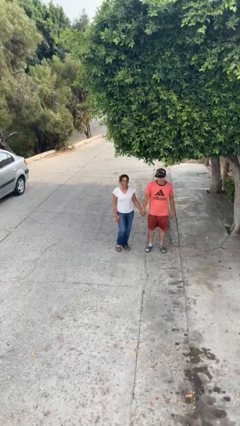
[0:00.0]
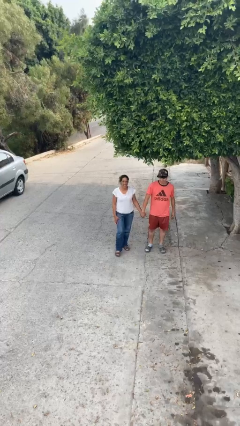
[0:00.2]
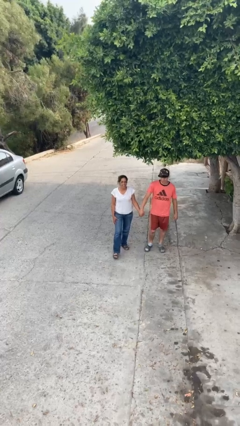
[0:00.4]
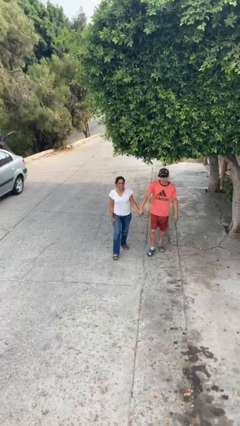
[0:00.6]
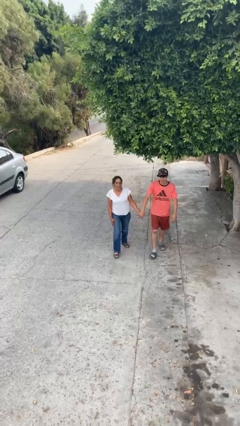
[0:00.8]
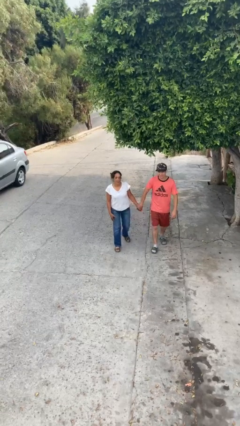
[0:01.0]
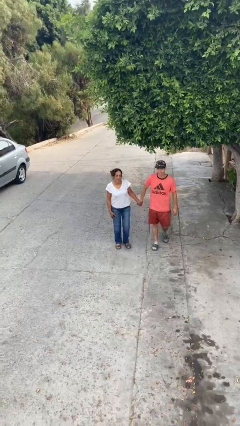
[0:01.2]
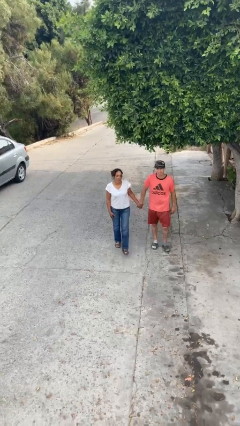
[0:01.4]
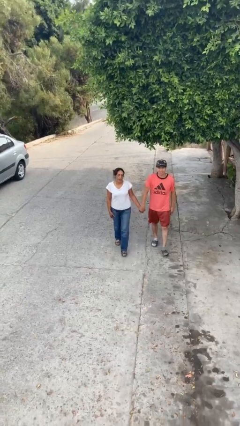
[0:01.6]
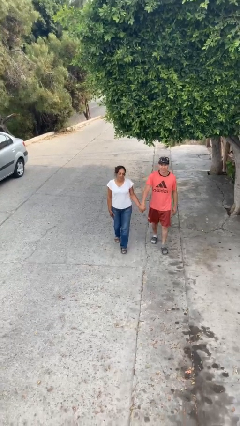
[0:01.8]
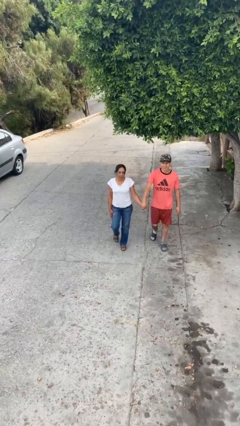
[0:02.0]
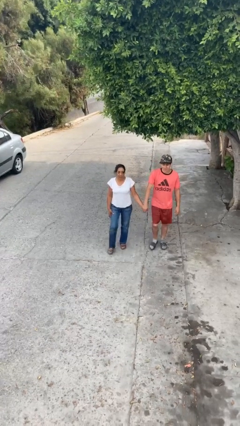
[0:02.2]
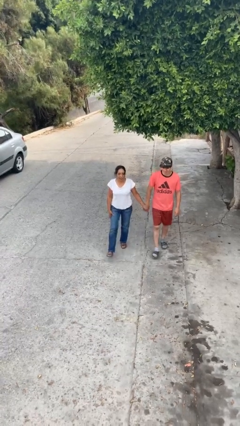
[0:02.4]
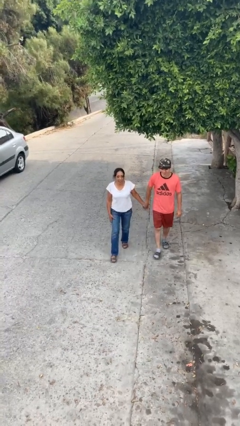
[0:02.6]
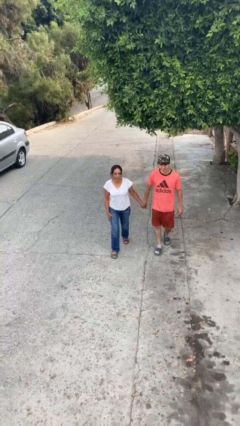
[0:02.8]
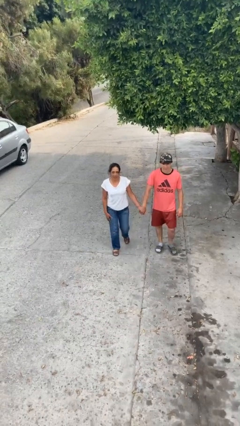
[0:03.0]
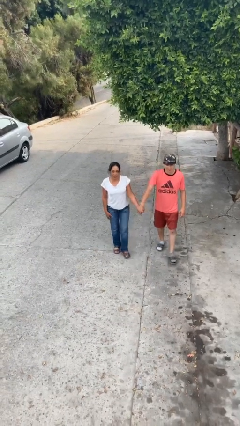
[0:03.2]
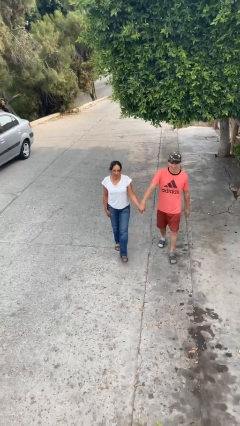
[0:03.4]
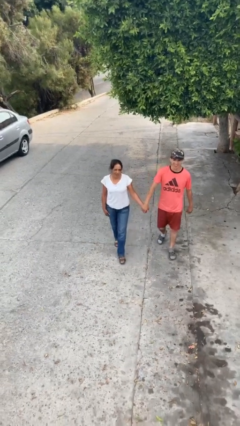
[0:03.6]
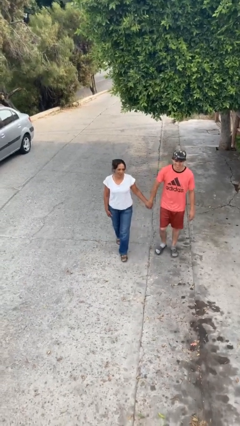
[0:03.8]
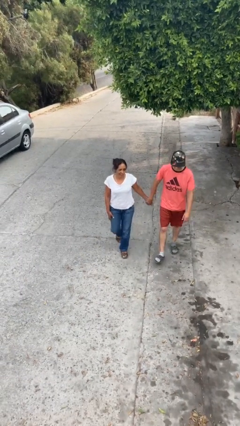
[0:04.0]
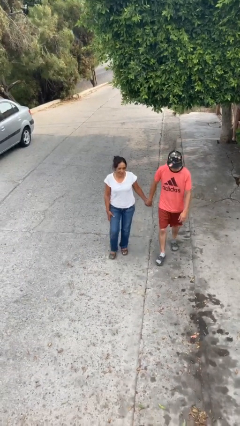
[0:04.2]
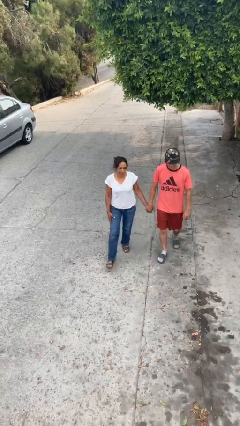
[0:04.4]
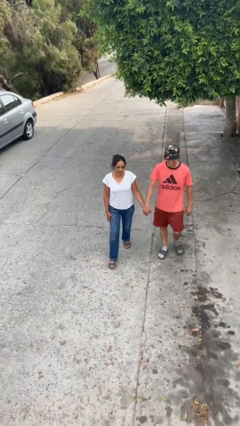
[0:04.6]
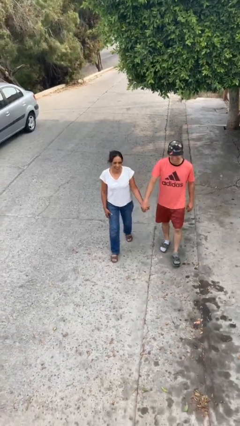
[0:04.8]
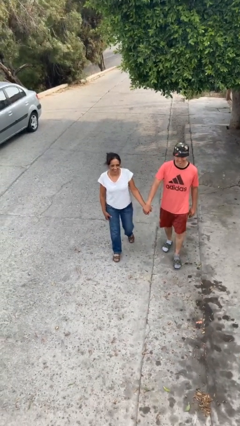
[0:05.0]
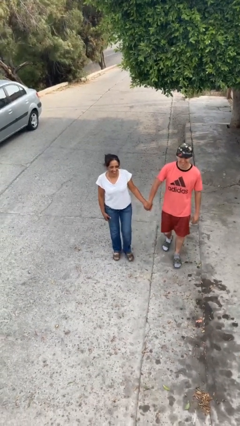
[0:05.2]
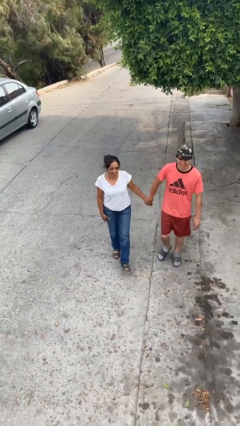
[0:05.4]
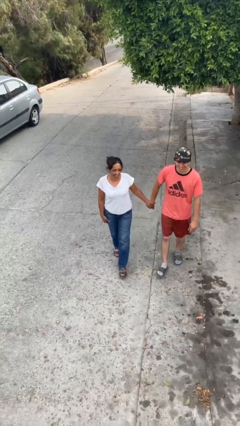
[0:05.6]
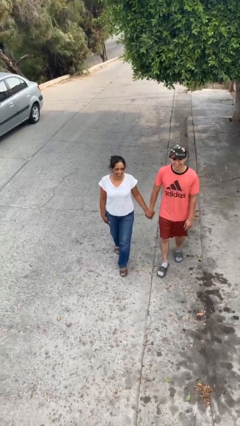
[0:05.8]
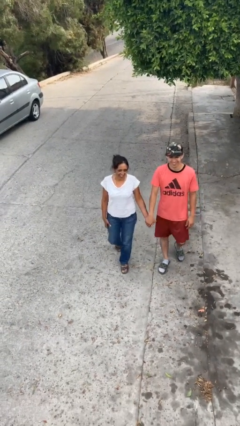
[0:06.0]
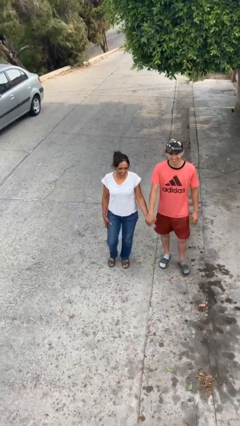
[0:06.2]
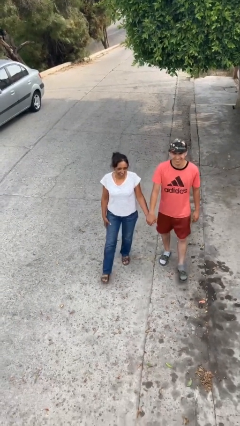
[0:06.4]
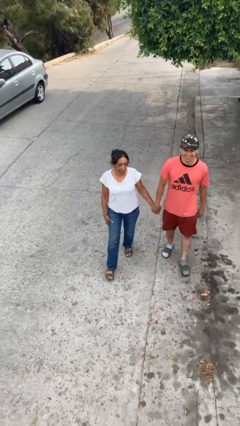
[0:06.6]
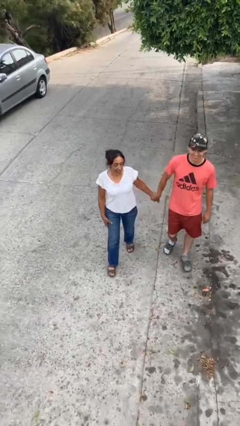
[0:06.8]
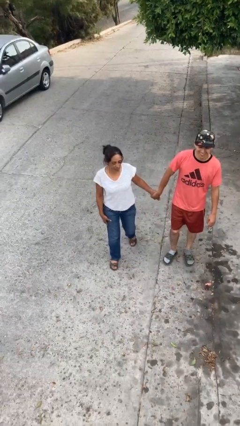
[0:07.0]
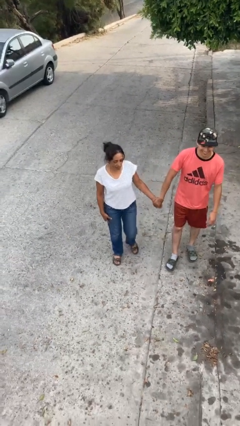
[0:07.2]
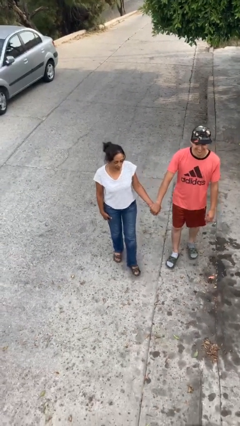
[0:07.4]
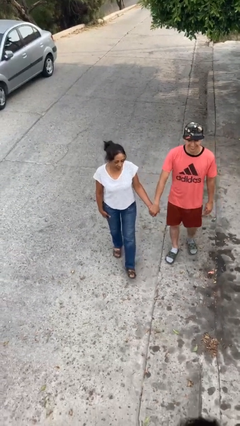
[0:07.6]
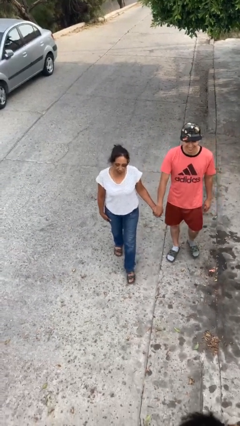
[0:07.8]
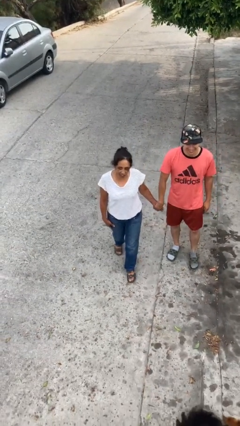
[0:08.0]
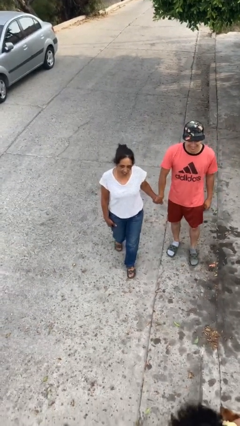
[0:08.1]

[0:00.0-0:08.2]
person holds hand

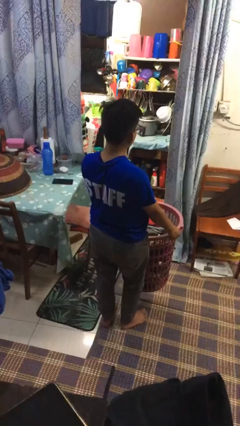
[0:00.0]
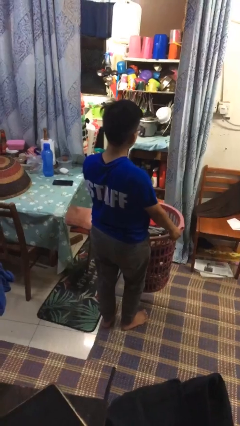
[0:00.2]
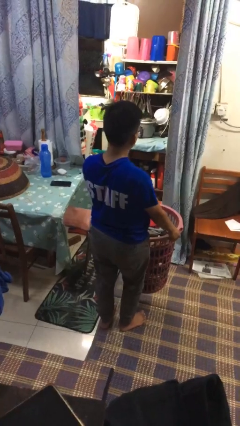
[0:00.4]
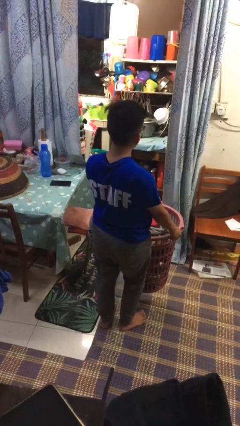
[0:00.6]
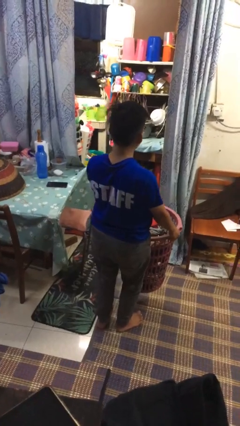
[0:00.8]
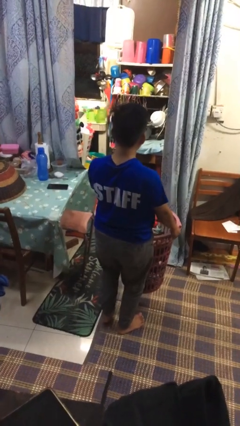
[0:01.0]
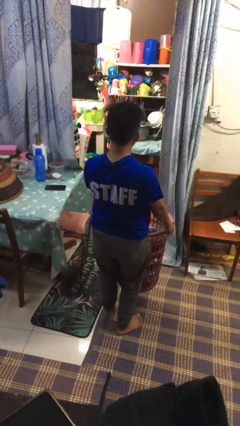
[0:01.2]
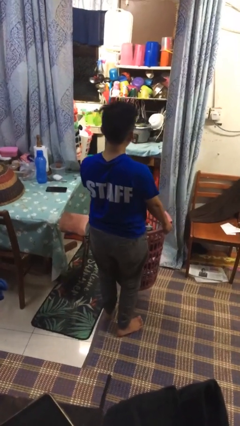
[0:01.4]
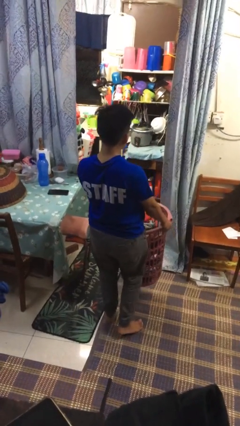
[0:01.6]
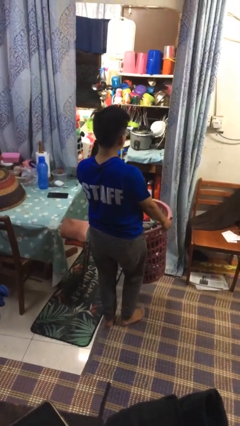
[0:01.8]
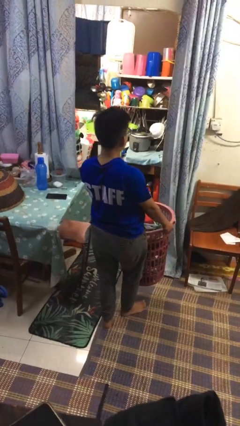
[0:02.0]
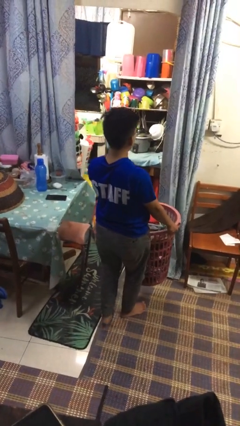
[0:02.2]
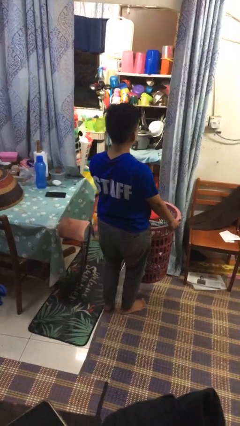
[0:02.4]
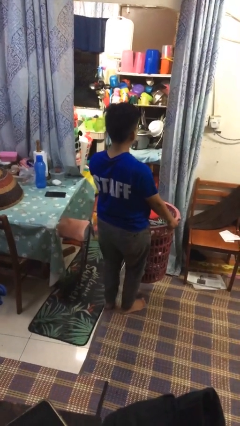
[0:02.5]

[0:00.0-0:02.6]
person carries laundry basket

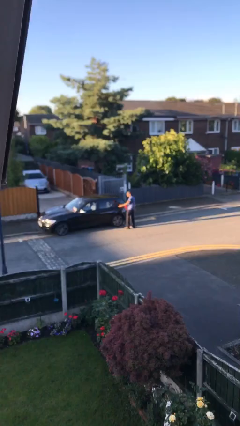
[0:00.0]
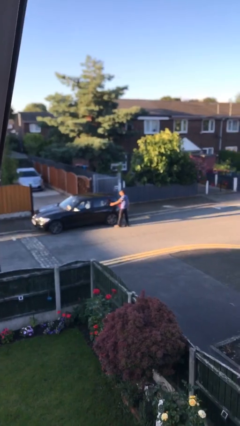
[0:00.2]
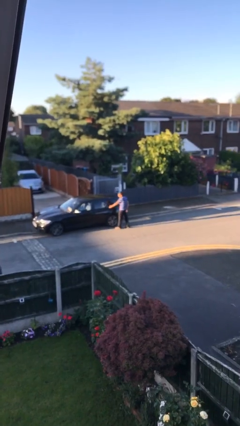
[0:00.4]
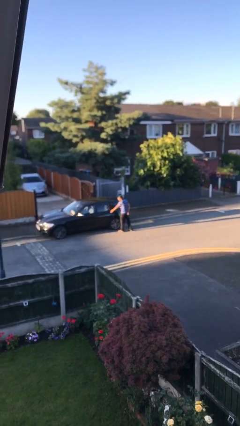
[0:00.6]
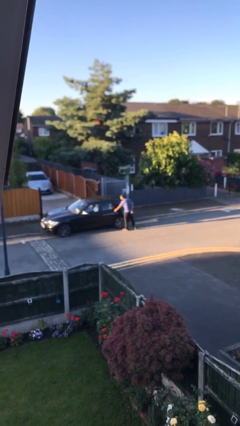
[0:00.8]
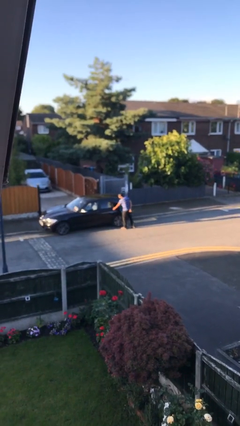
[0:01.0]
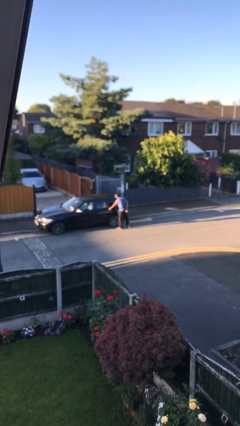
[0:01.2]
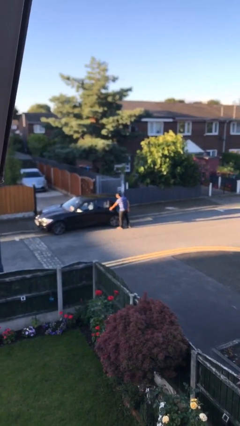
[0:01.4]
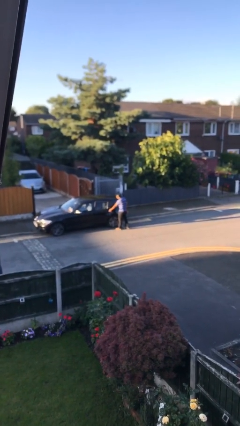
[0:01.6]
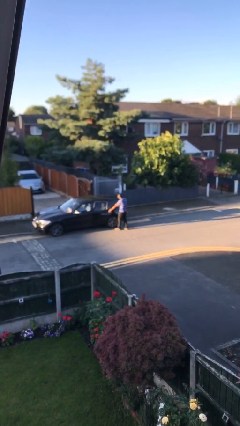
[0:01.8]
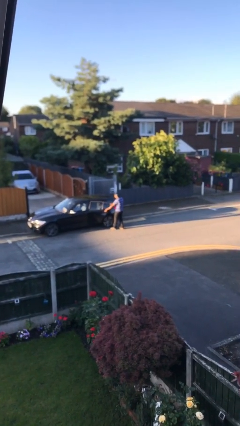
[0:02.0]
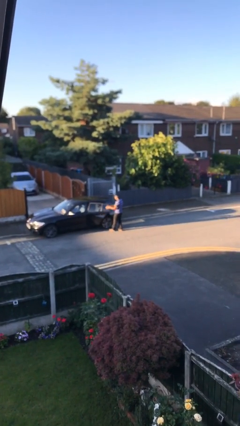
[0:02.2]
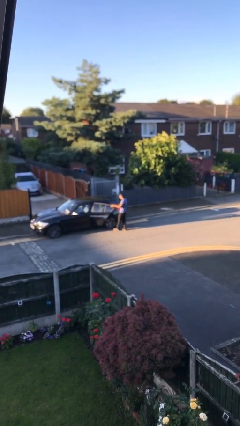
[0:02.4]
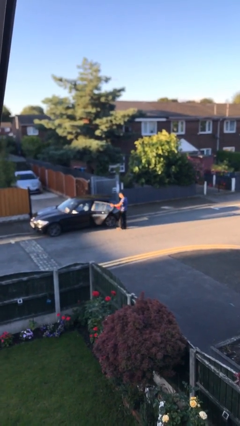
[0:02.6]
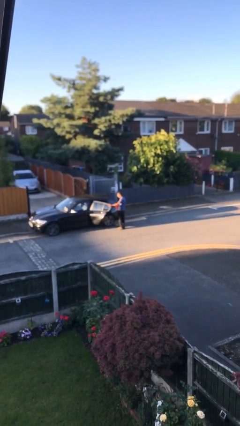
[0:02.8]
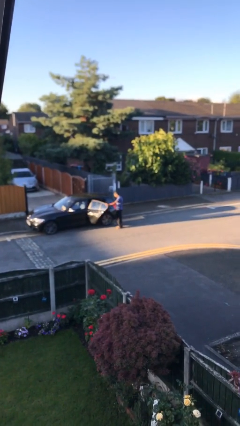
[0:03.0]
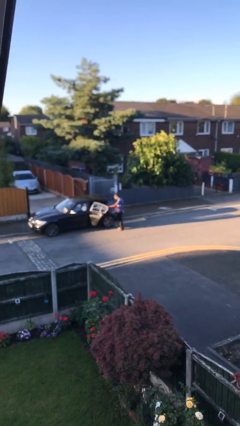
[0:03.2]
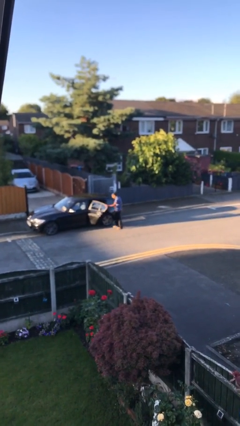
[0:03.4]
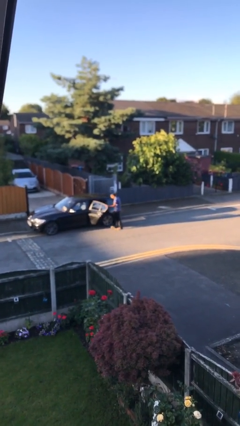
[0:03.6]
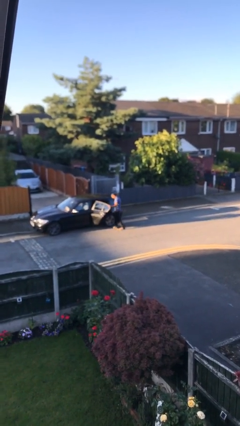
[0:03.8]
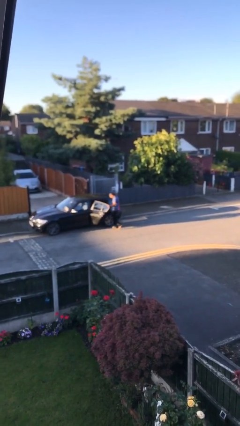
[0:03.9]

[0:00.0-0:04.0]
person opens car door

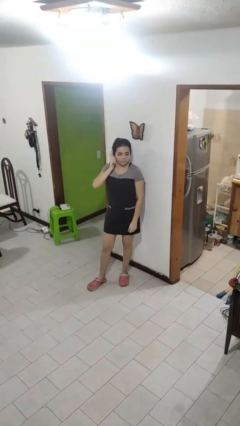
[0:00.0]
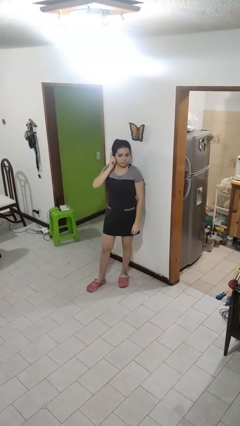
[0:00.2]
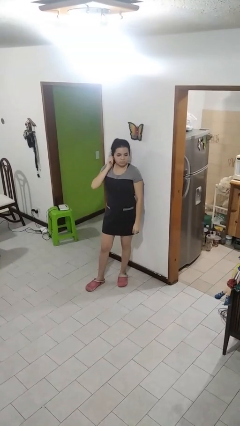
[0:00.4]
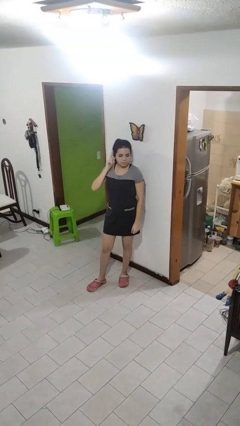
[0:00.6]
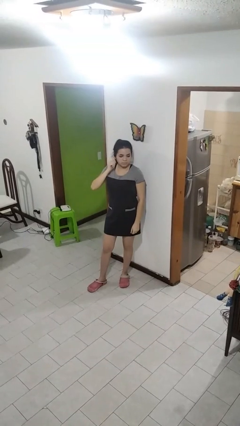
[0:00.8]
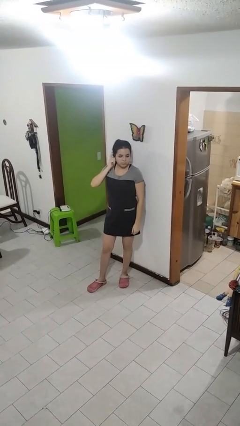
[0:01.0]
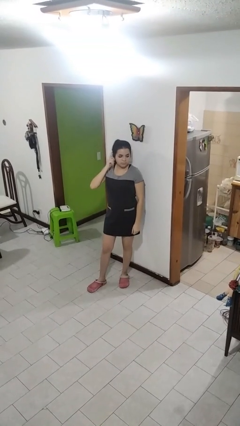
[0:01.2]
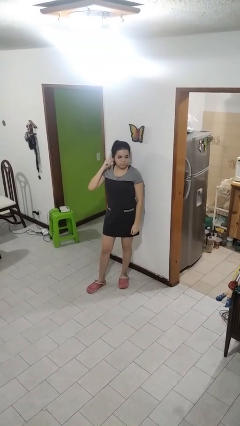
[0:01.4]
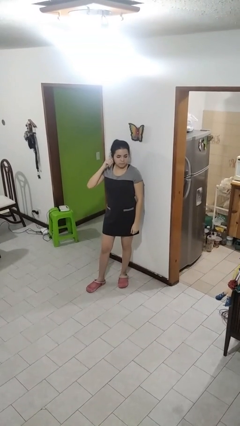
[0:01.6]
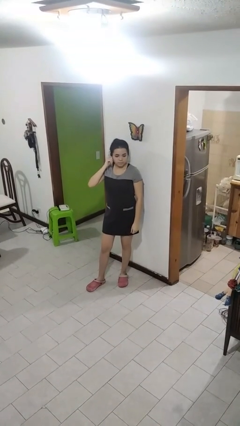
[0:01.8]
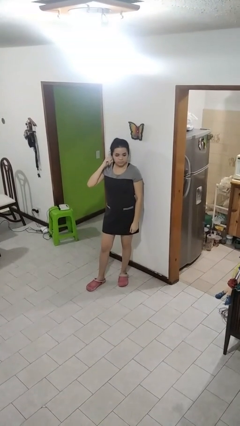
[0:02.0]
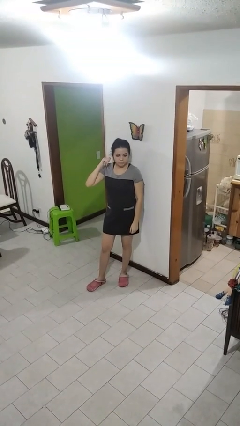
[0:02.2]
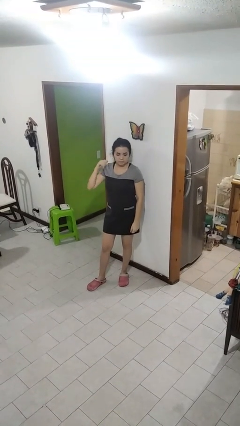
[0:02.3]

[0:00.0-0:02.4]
person touches earlobe

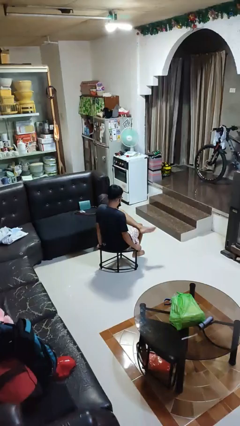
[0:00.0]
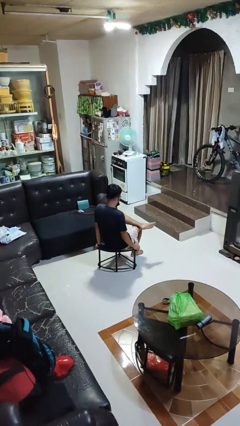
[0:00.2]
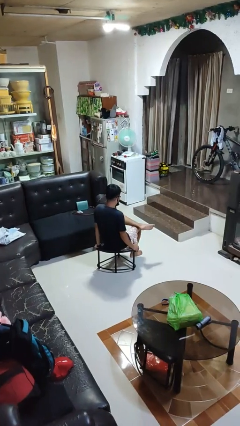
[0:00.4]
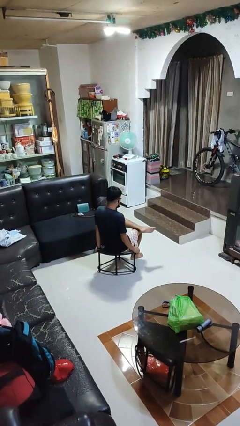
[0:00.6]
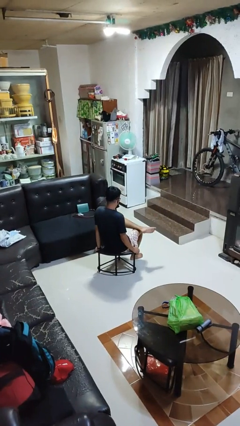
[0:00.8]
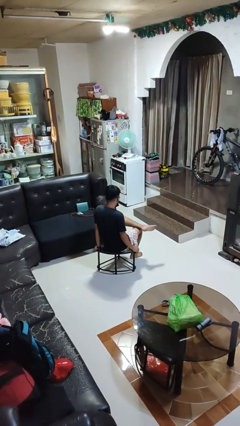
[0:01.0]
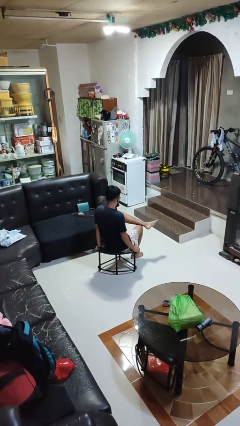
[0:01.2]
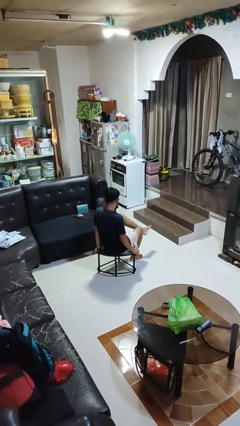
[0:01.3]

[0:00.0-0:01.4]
person crosses legs
